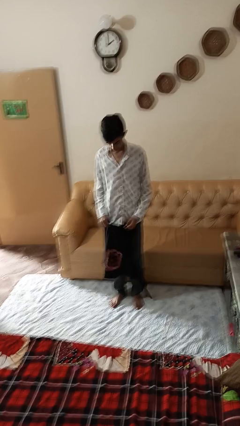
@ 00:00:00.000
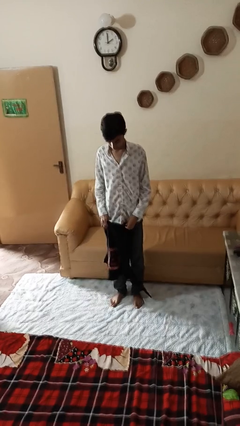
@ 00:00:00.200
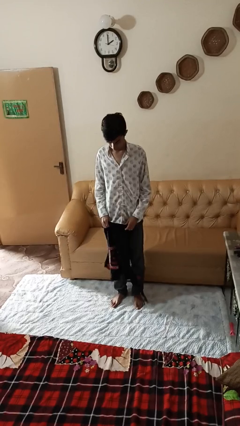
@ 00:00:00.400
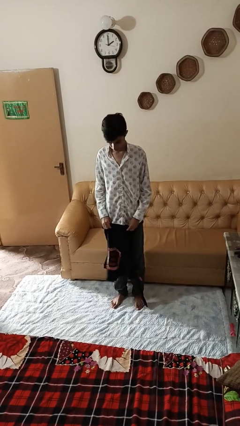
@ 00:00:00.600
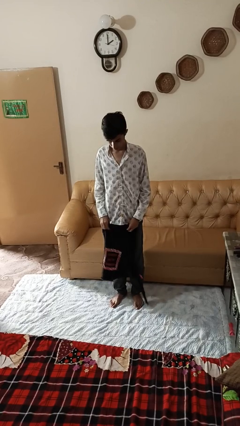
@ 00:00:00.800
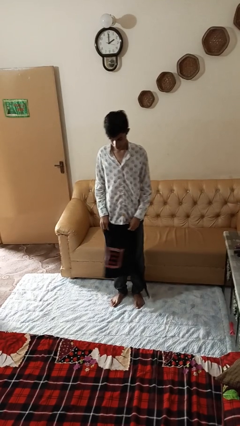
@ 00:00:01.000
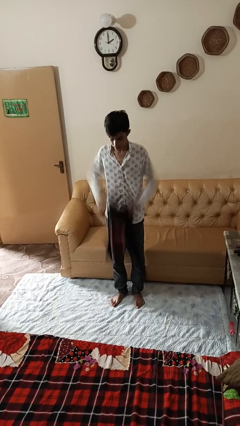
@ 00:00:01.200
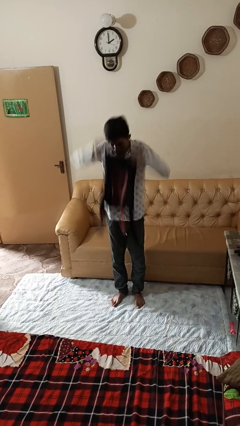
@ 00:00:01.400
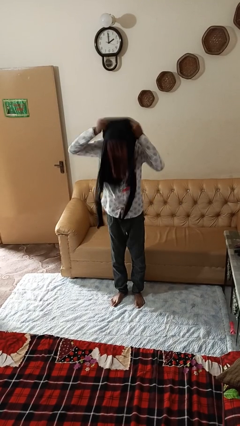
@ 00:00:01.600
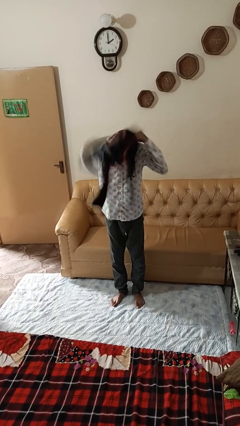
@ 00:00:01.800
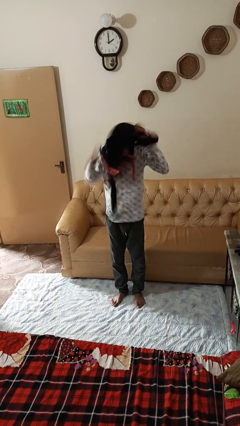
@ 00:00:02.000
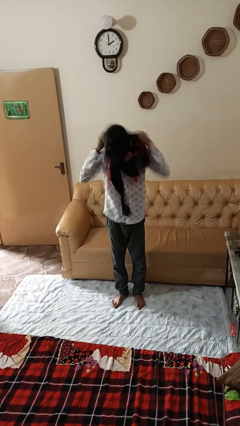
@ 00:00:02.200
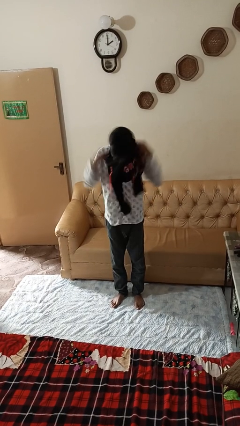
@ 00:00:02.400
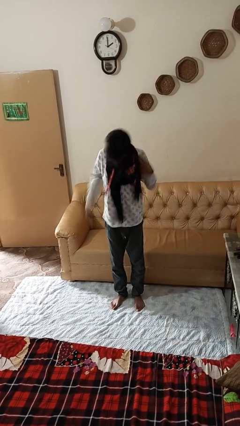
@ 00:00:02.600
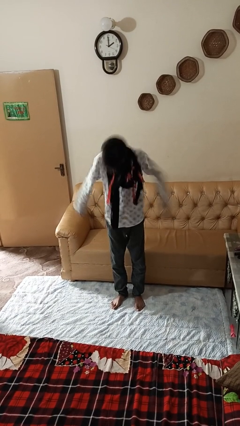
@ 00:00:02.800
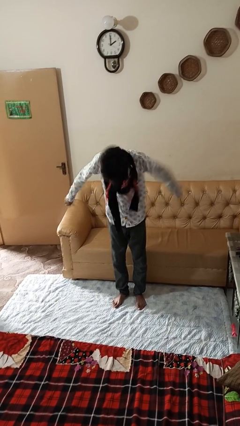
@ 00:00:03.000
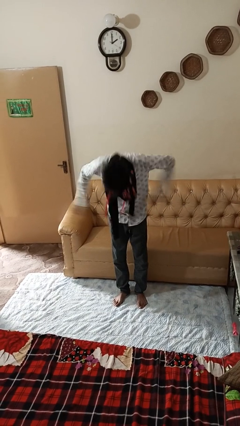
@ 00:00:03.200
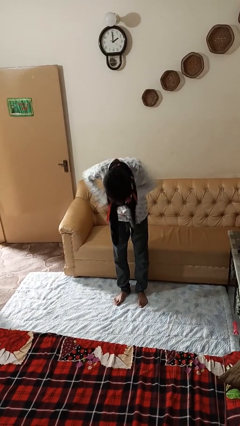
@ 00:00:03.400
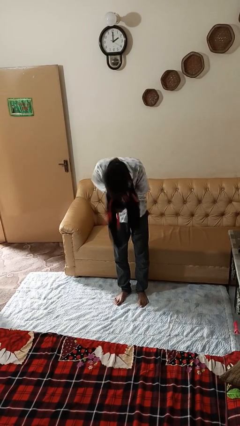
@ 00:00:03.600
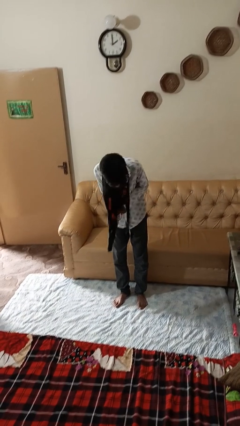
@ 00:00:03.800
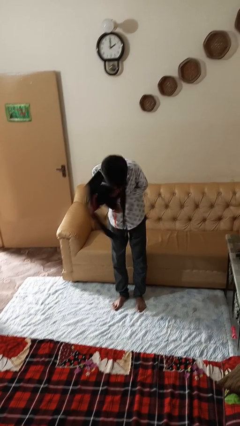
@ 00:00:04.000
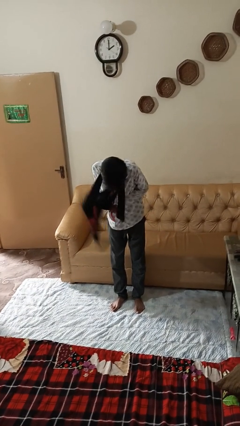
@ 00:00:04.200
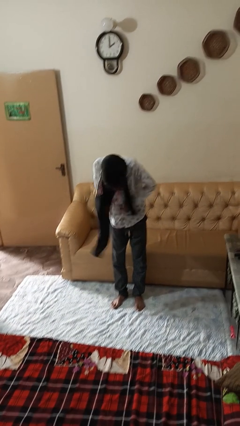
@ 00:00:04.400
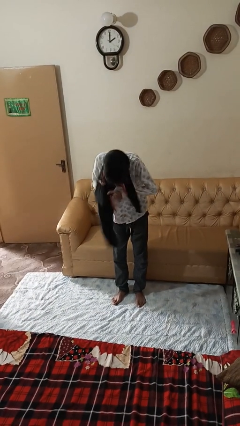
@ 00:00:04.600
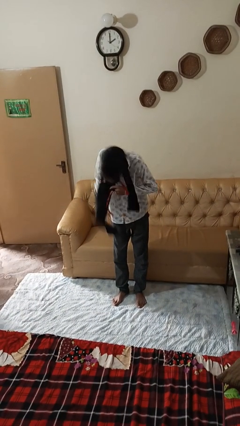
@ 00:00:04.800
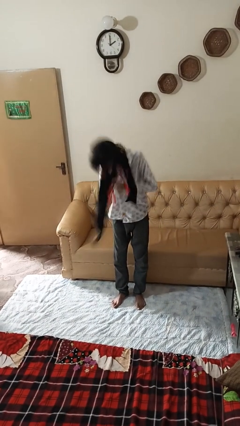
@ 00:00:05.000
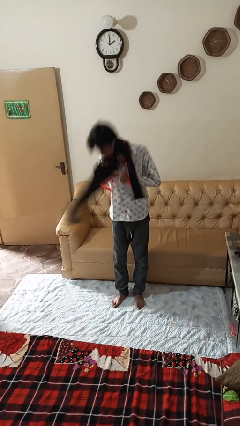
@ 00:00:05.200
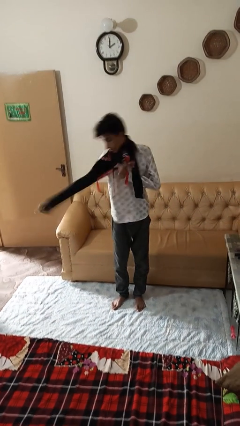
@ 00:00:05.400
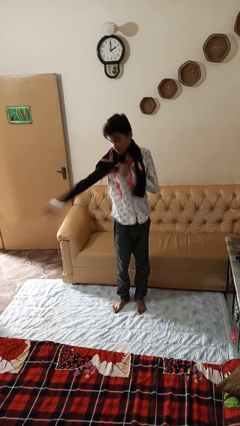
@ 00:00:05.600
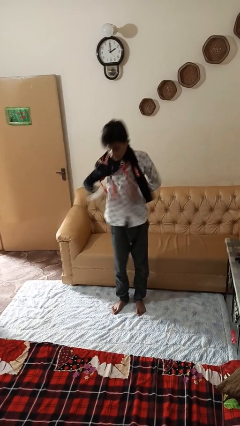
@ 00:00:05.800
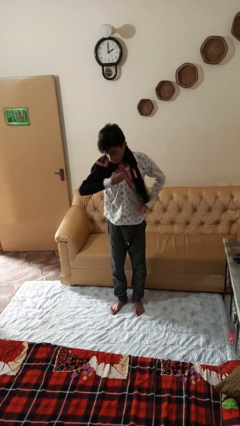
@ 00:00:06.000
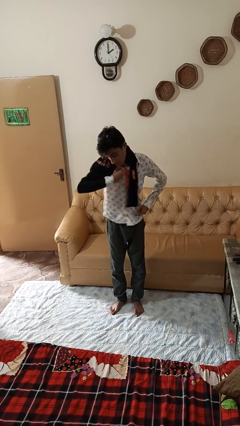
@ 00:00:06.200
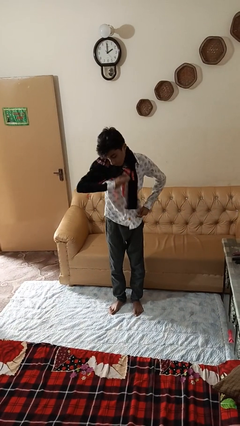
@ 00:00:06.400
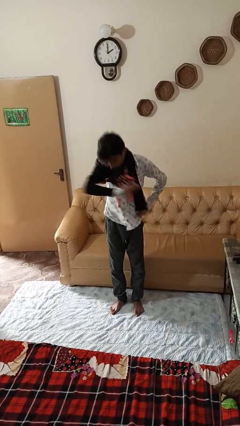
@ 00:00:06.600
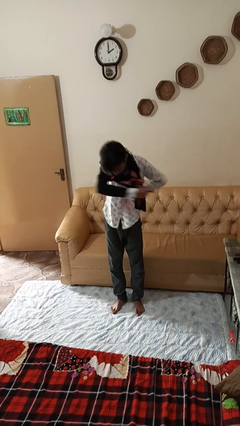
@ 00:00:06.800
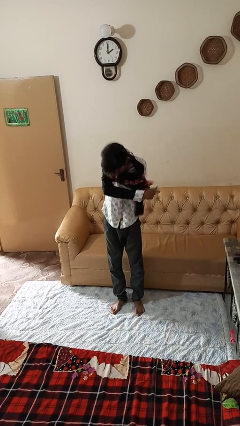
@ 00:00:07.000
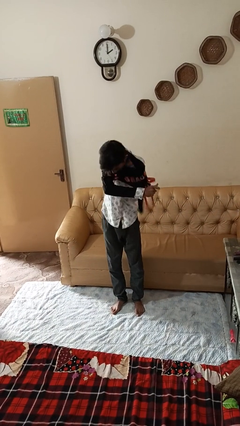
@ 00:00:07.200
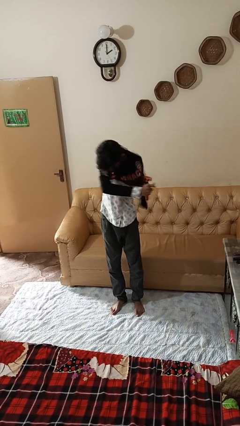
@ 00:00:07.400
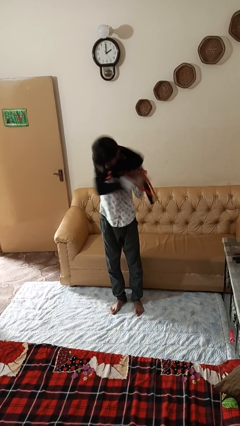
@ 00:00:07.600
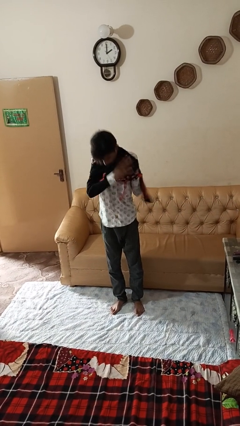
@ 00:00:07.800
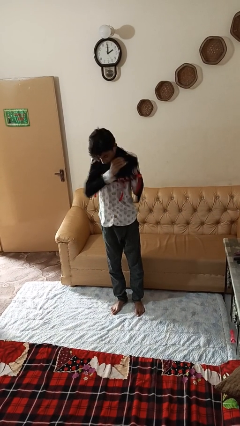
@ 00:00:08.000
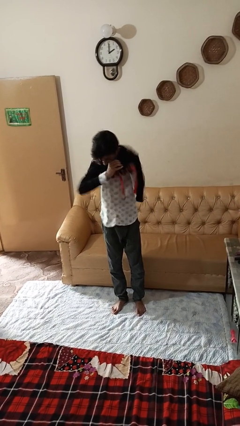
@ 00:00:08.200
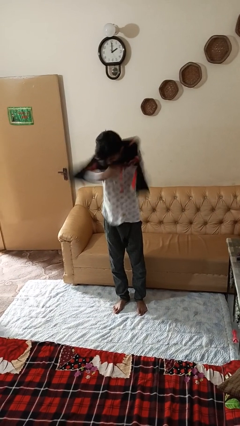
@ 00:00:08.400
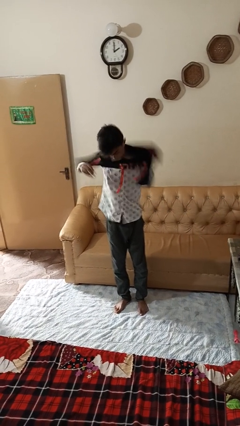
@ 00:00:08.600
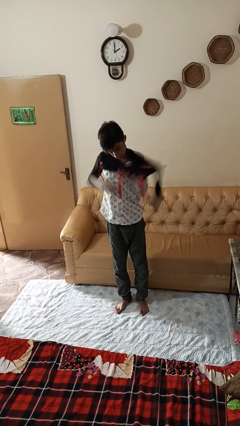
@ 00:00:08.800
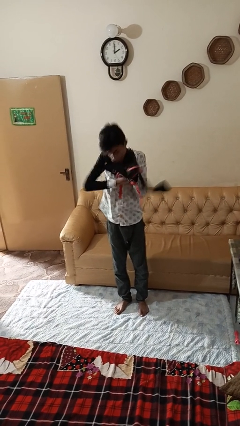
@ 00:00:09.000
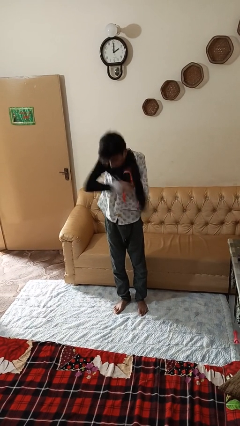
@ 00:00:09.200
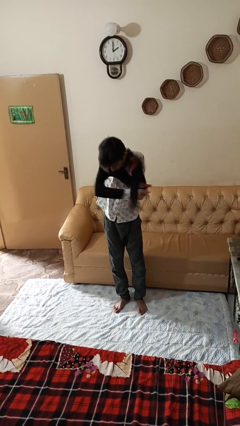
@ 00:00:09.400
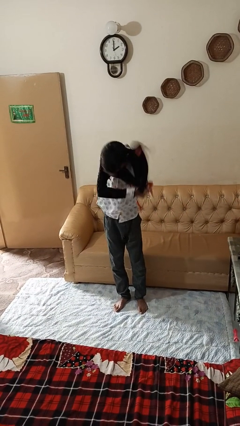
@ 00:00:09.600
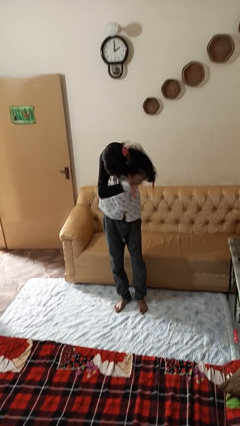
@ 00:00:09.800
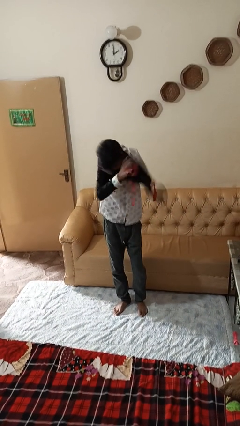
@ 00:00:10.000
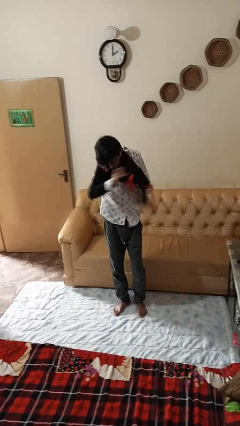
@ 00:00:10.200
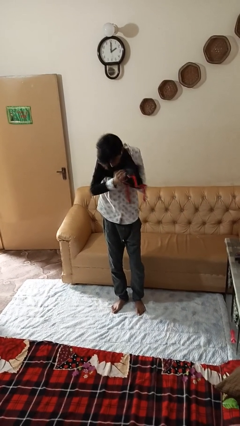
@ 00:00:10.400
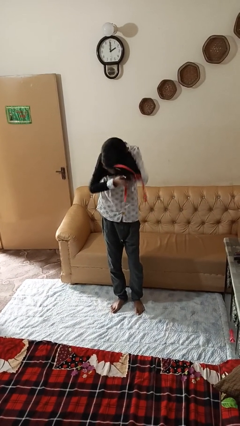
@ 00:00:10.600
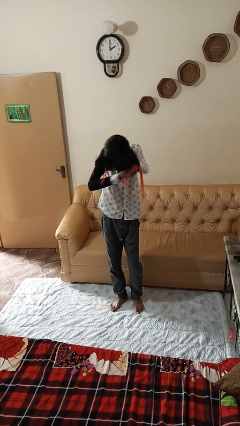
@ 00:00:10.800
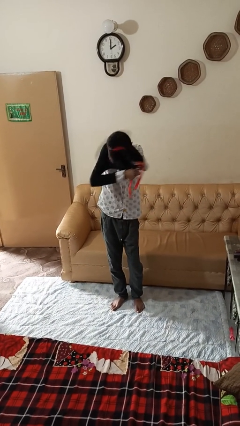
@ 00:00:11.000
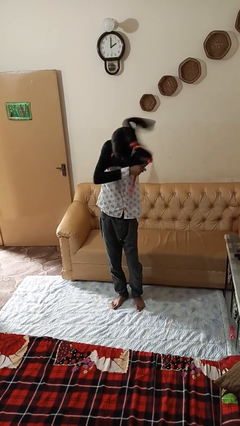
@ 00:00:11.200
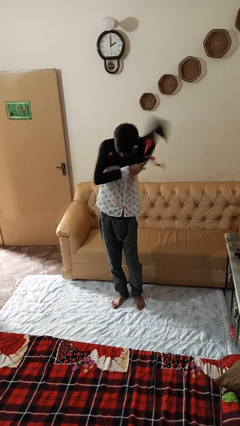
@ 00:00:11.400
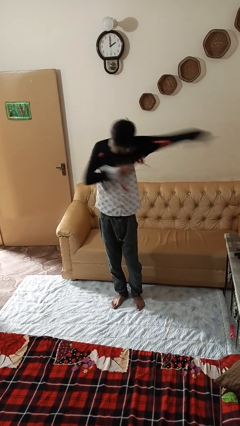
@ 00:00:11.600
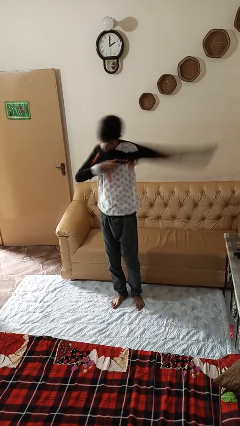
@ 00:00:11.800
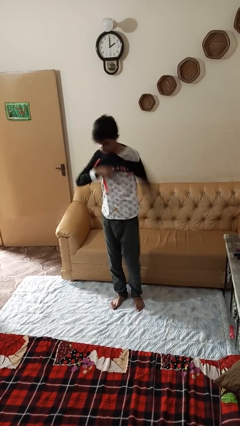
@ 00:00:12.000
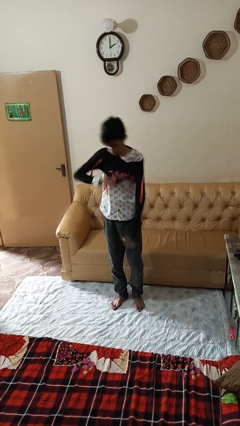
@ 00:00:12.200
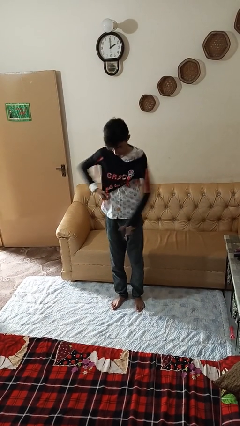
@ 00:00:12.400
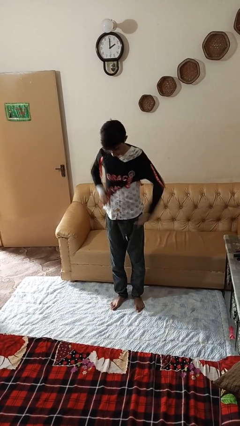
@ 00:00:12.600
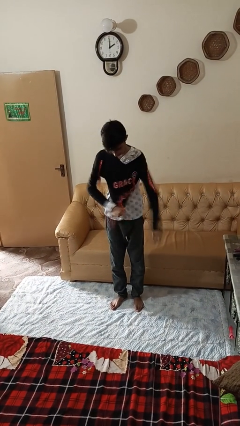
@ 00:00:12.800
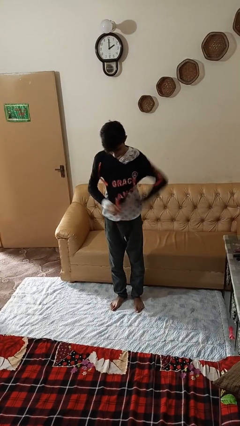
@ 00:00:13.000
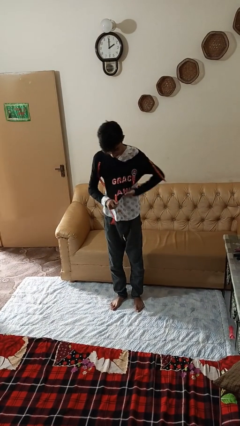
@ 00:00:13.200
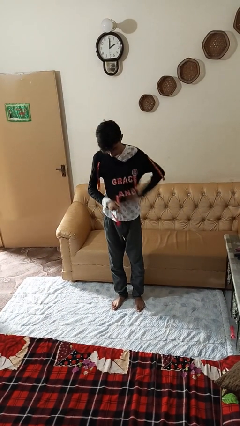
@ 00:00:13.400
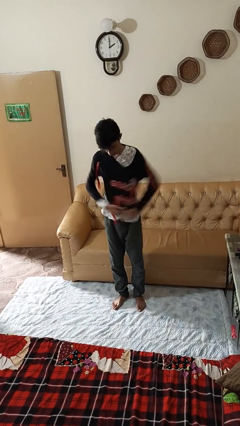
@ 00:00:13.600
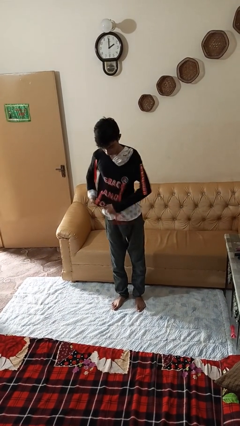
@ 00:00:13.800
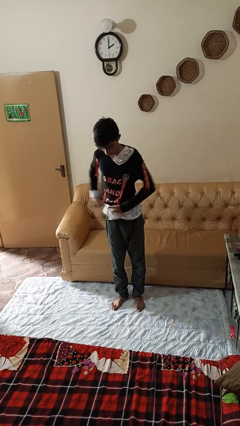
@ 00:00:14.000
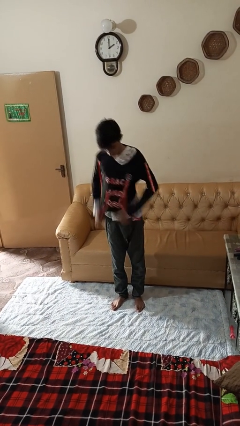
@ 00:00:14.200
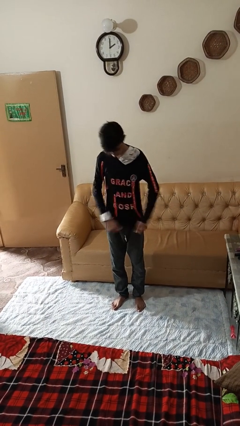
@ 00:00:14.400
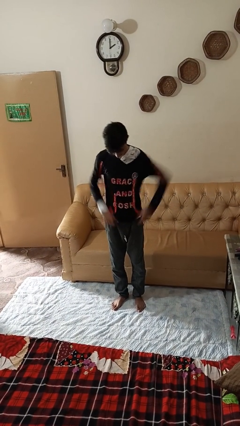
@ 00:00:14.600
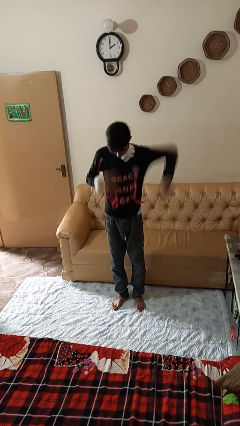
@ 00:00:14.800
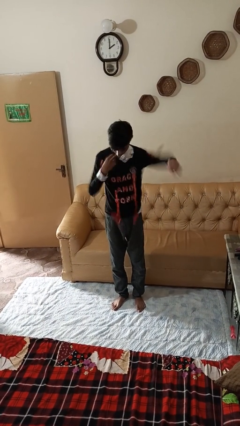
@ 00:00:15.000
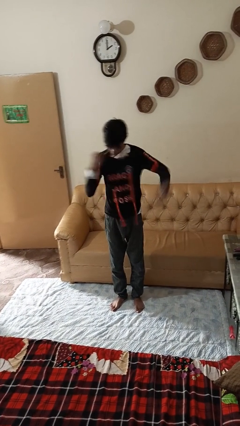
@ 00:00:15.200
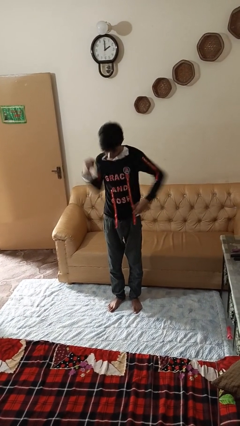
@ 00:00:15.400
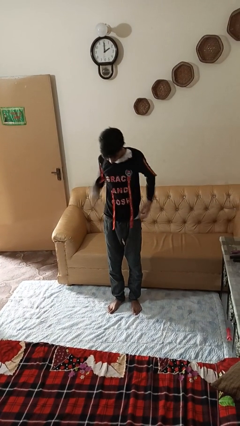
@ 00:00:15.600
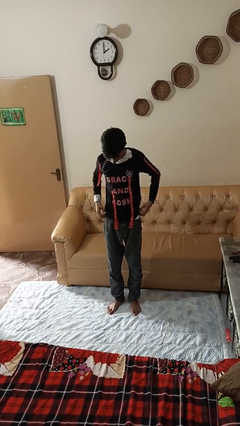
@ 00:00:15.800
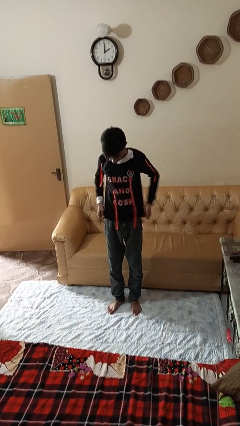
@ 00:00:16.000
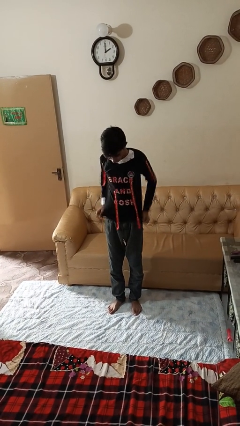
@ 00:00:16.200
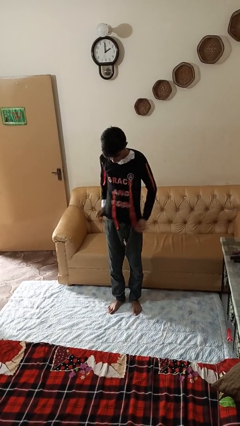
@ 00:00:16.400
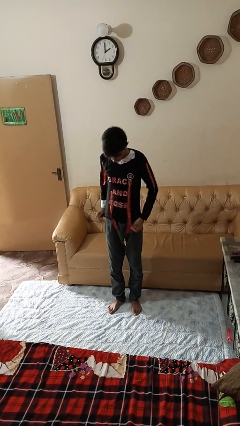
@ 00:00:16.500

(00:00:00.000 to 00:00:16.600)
person puts on shirt

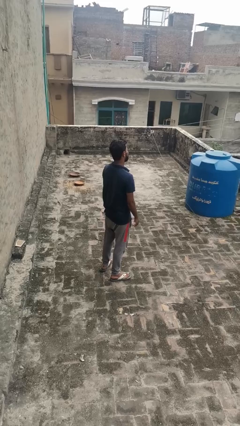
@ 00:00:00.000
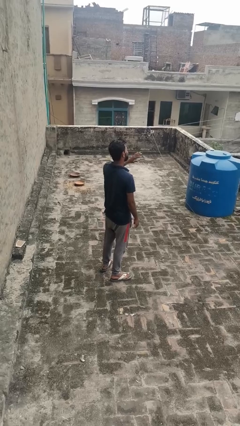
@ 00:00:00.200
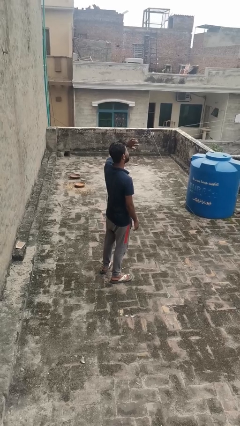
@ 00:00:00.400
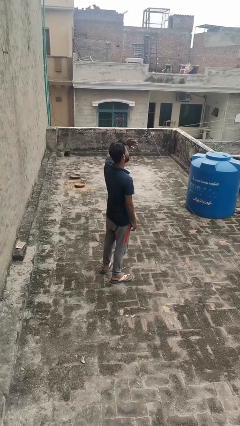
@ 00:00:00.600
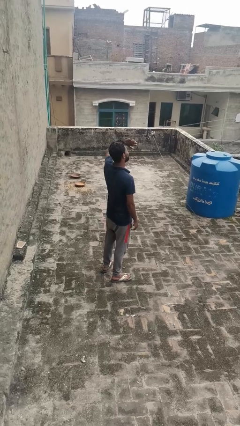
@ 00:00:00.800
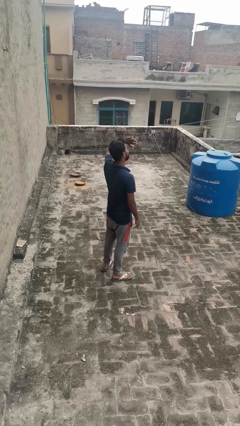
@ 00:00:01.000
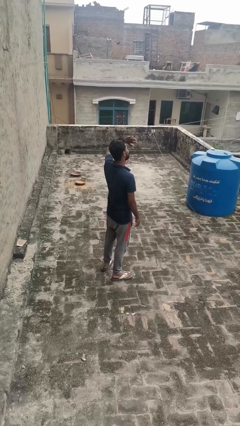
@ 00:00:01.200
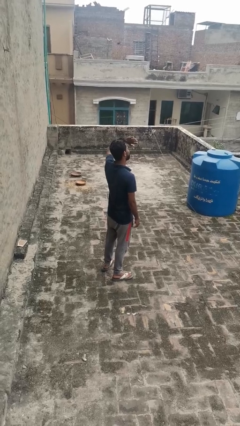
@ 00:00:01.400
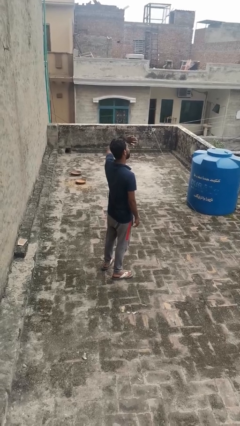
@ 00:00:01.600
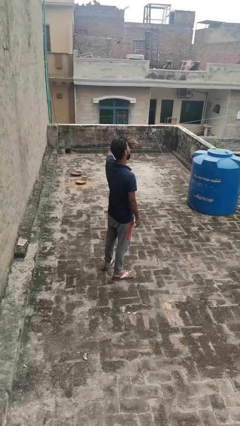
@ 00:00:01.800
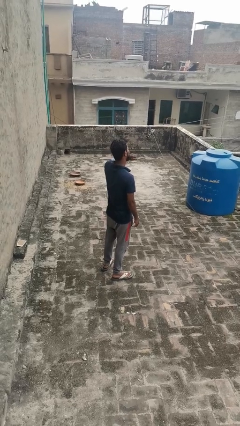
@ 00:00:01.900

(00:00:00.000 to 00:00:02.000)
person shades eyes
